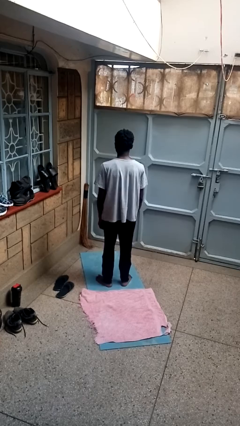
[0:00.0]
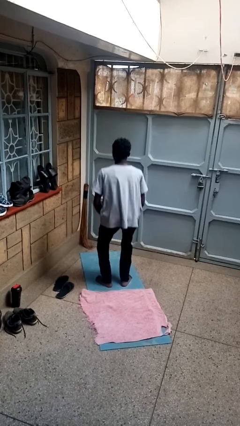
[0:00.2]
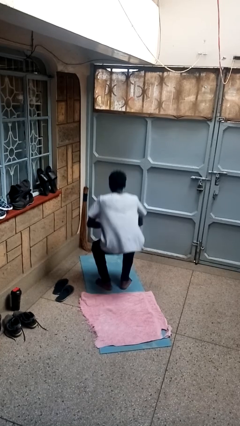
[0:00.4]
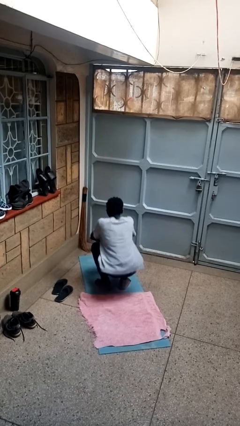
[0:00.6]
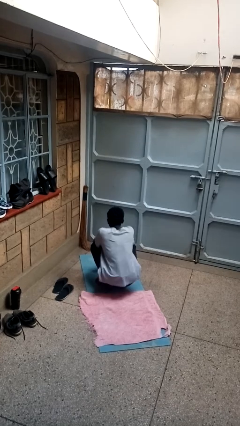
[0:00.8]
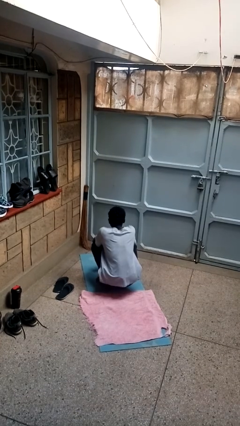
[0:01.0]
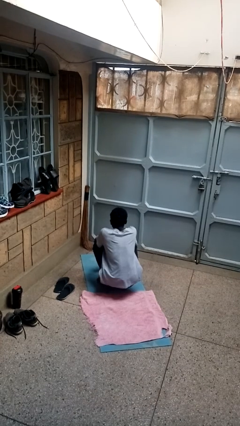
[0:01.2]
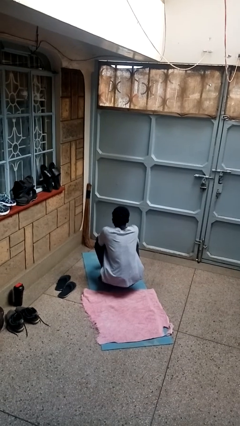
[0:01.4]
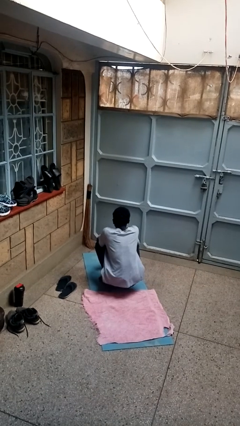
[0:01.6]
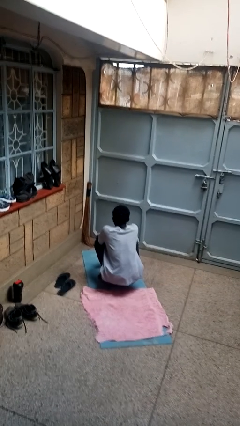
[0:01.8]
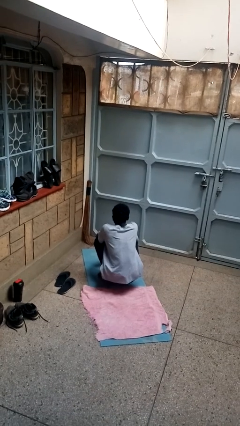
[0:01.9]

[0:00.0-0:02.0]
person squats

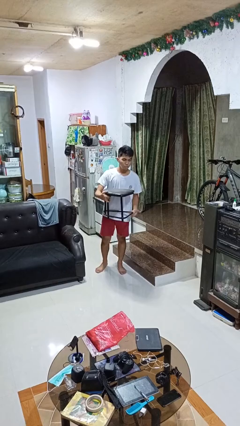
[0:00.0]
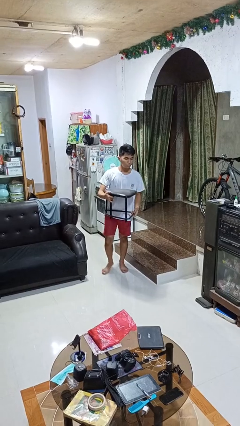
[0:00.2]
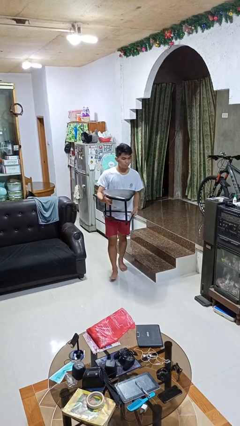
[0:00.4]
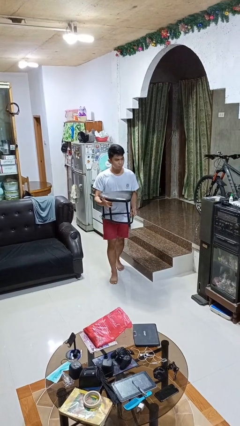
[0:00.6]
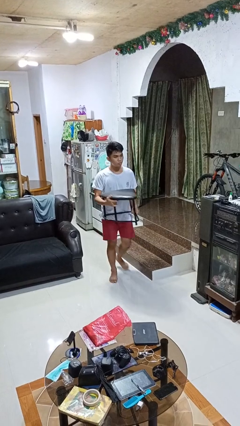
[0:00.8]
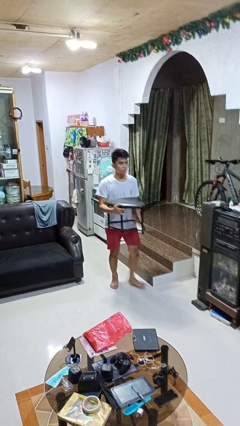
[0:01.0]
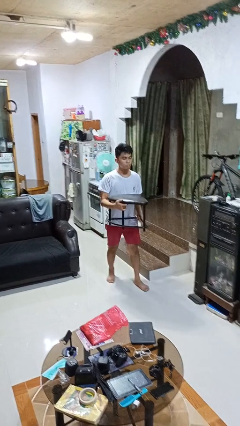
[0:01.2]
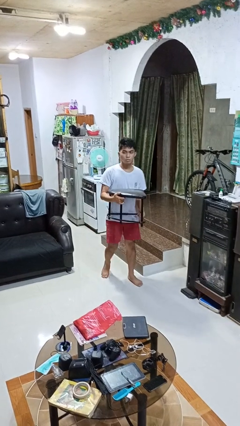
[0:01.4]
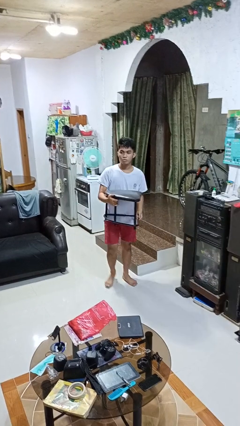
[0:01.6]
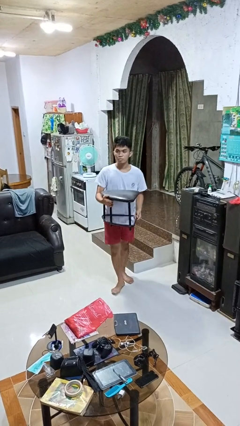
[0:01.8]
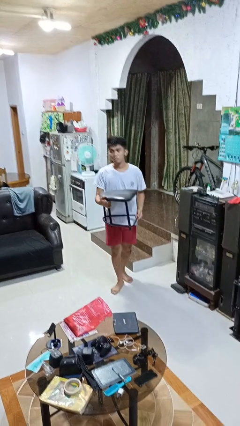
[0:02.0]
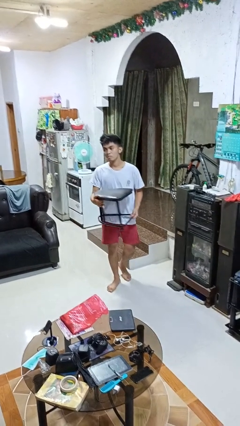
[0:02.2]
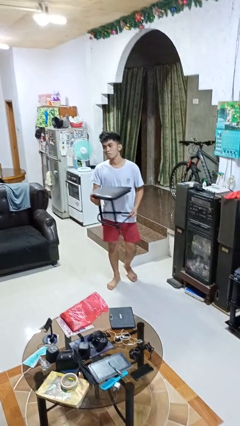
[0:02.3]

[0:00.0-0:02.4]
person carries furniture

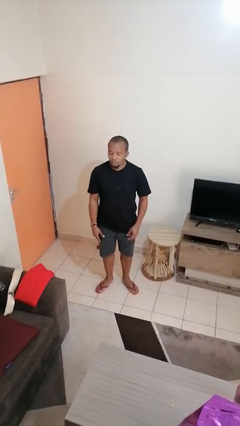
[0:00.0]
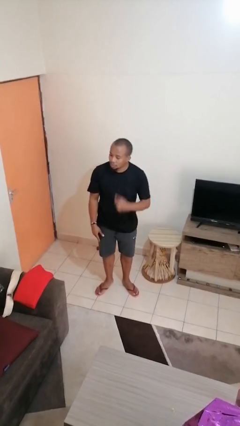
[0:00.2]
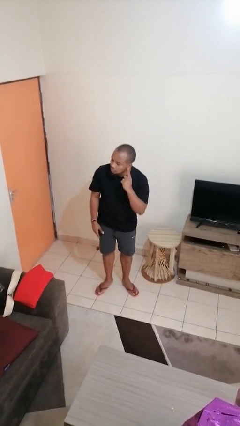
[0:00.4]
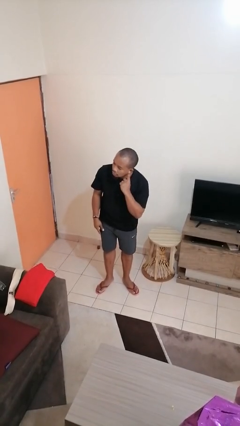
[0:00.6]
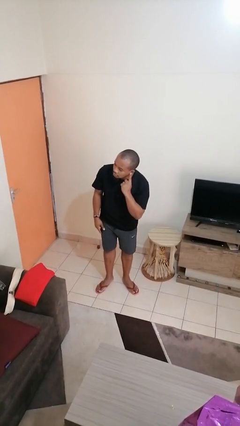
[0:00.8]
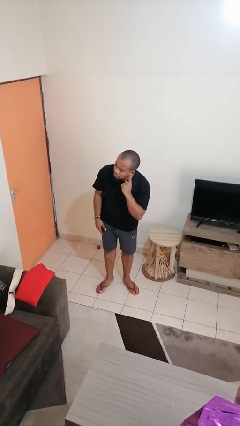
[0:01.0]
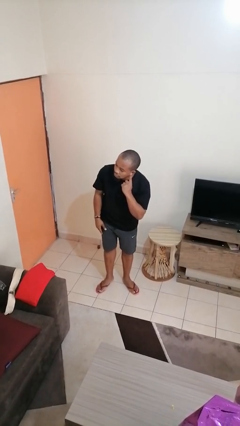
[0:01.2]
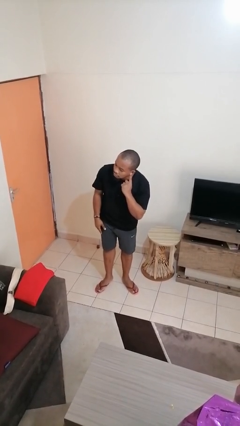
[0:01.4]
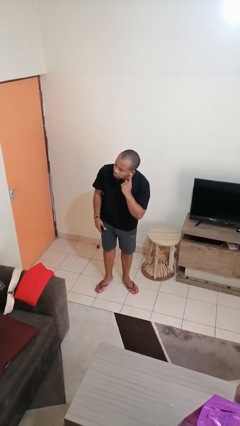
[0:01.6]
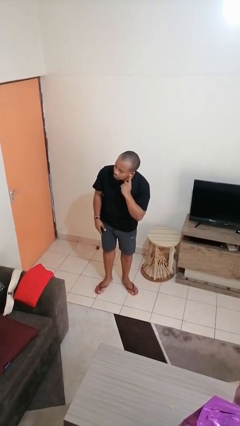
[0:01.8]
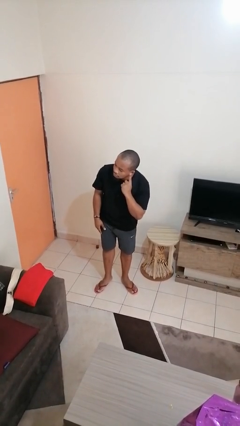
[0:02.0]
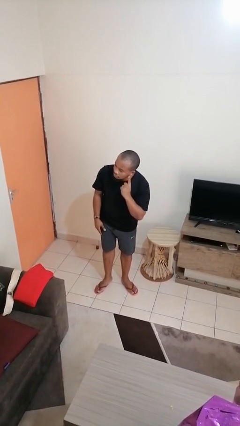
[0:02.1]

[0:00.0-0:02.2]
person gestures listen closely

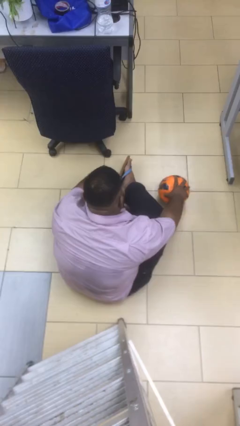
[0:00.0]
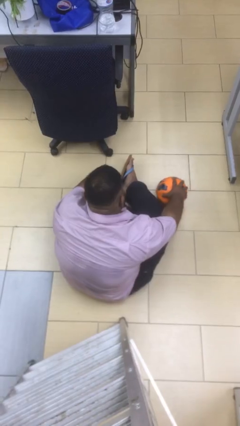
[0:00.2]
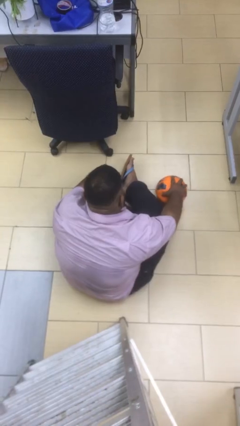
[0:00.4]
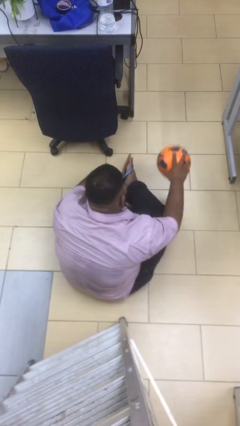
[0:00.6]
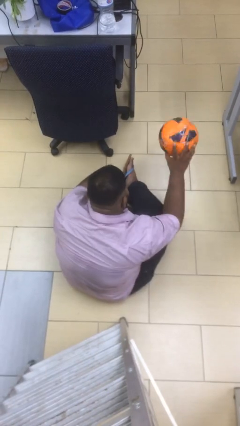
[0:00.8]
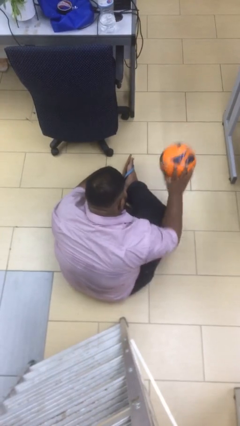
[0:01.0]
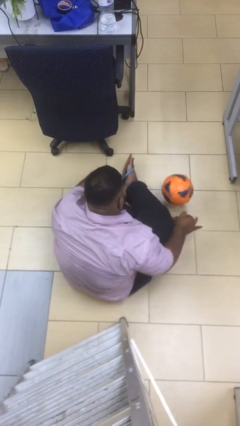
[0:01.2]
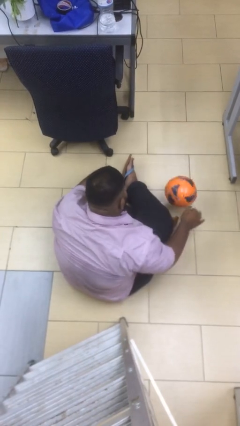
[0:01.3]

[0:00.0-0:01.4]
person bounces ball on floor

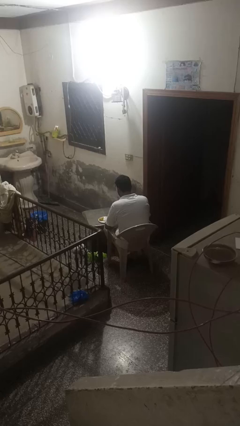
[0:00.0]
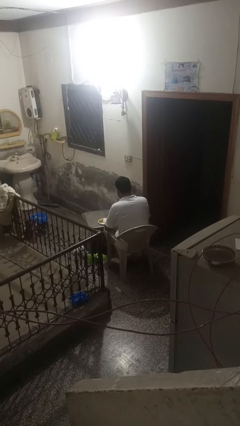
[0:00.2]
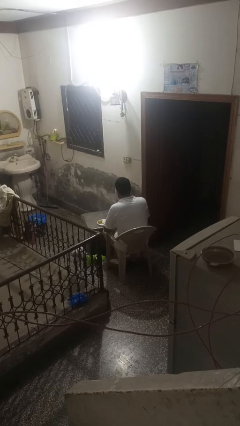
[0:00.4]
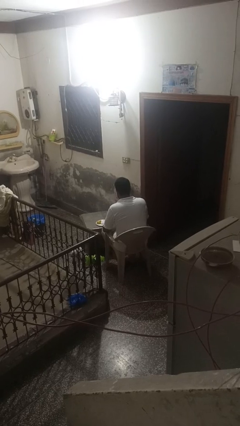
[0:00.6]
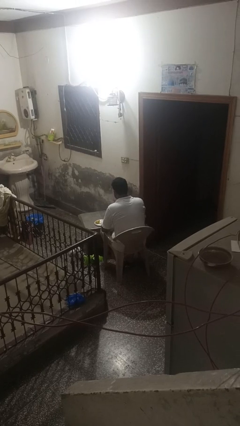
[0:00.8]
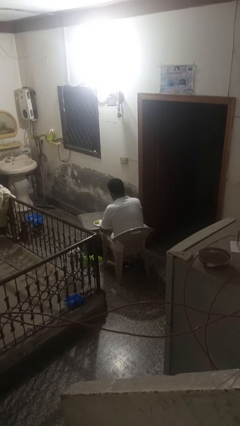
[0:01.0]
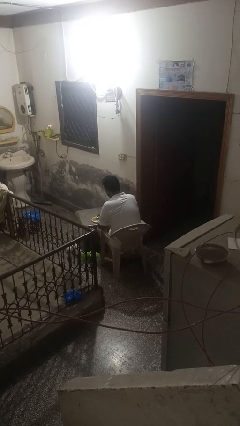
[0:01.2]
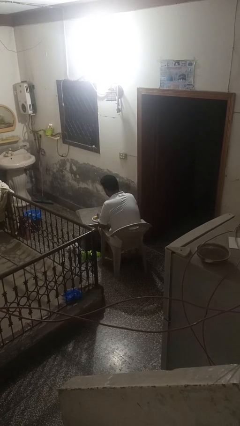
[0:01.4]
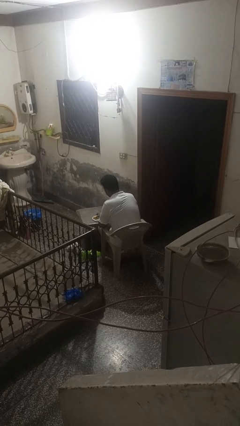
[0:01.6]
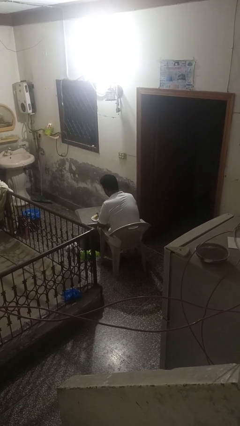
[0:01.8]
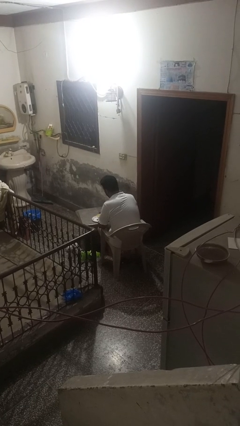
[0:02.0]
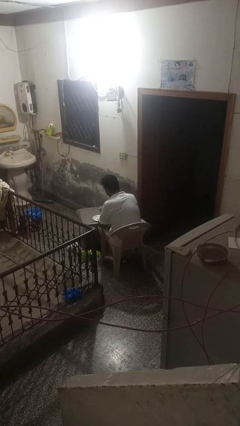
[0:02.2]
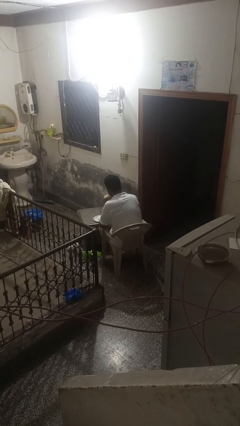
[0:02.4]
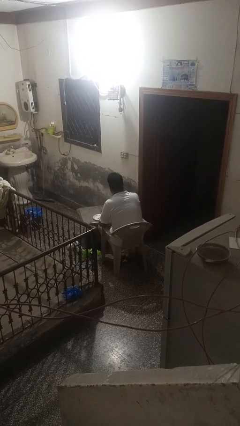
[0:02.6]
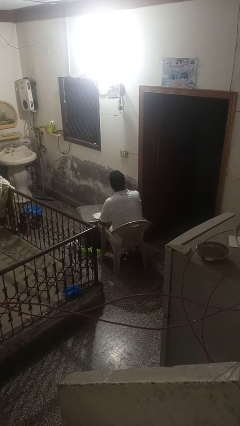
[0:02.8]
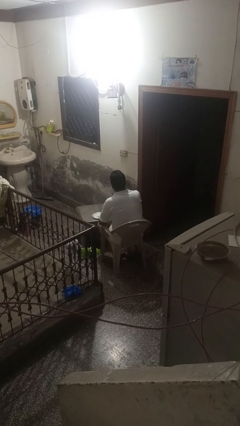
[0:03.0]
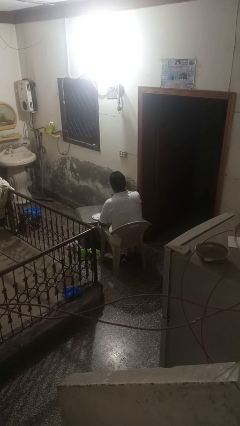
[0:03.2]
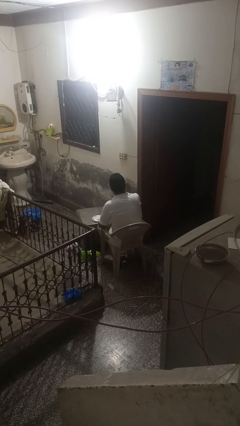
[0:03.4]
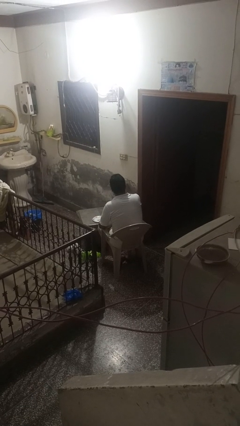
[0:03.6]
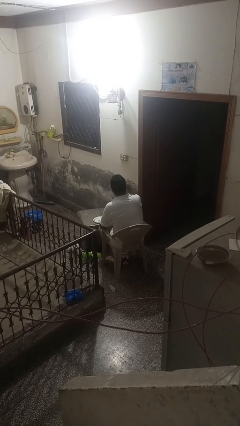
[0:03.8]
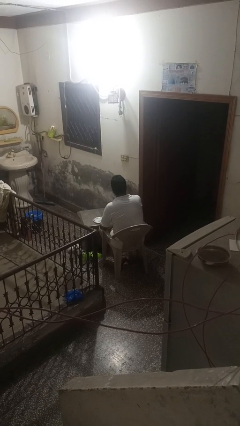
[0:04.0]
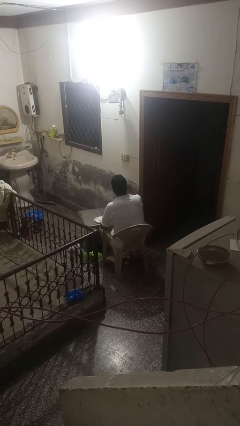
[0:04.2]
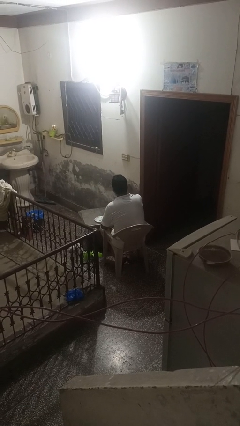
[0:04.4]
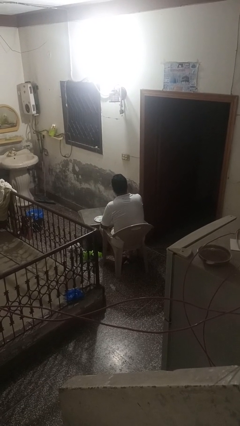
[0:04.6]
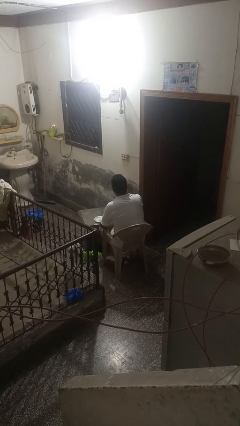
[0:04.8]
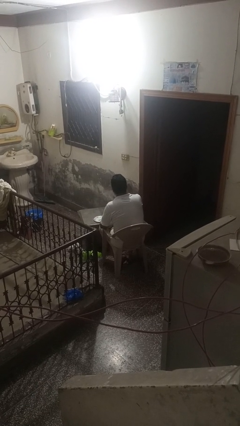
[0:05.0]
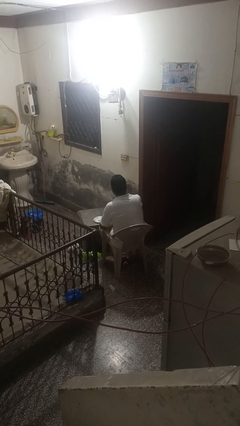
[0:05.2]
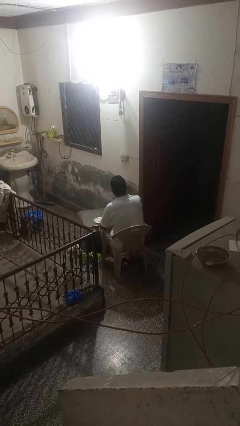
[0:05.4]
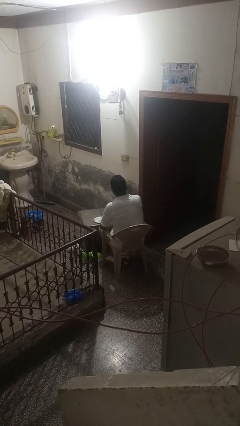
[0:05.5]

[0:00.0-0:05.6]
person eats with hands

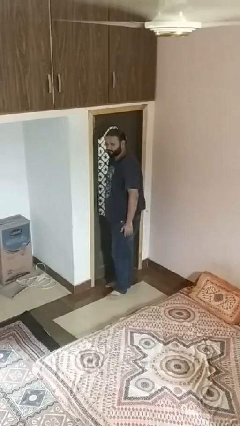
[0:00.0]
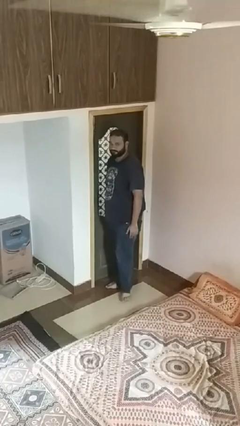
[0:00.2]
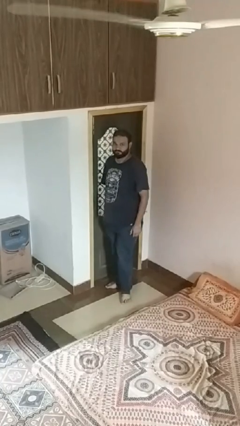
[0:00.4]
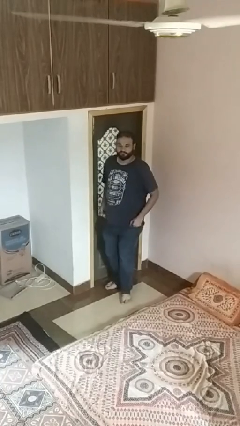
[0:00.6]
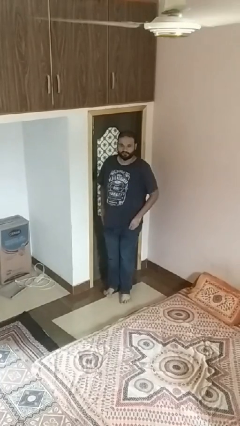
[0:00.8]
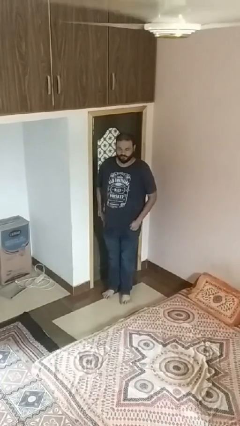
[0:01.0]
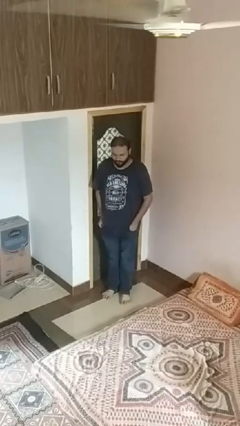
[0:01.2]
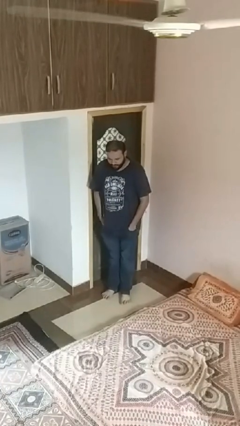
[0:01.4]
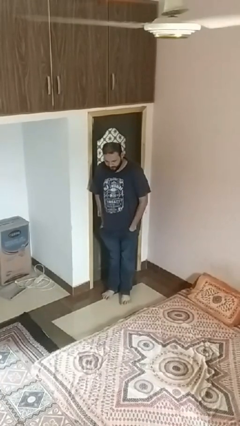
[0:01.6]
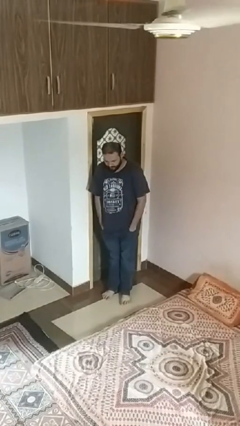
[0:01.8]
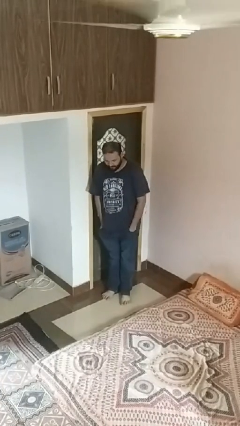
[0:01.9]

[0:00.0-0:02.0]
person puts hands in back pockets

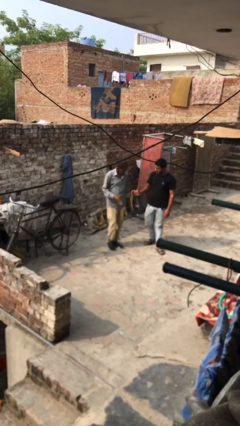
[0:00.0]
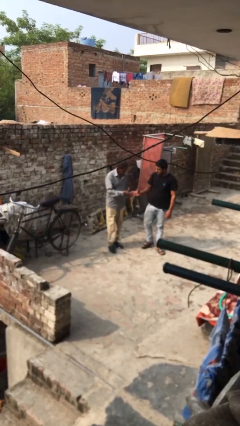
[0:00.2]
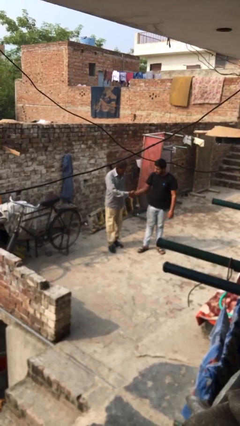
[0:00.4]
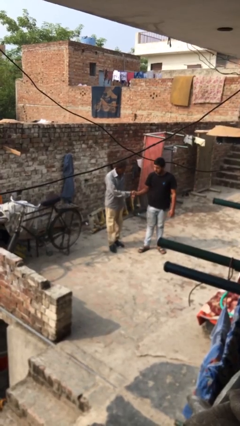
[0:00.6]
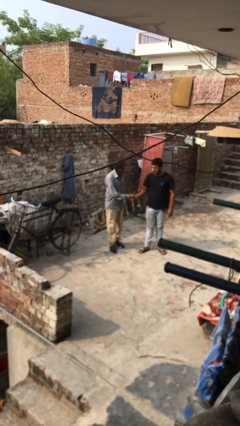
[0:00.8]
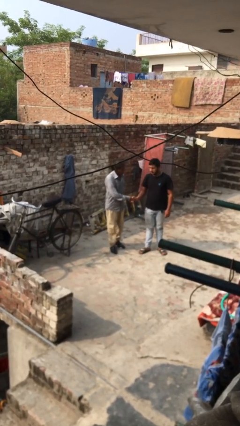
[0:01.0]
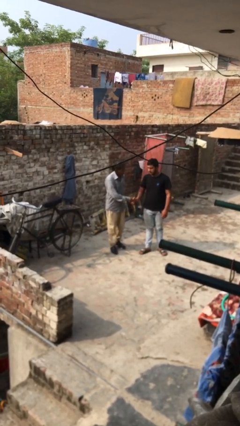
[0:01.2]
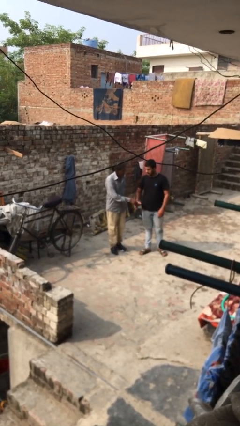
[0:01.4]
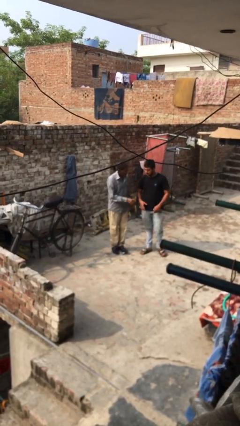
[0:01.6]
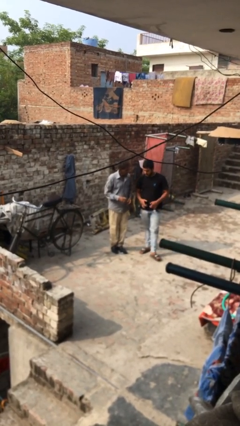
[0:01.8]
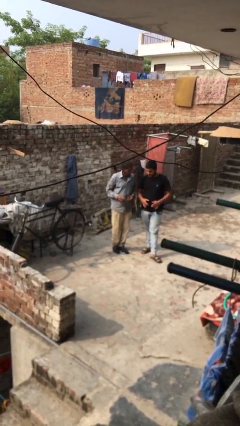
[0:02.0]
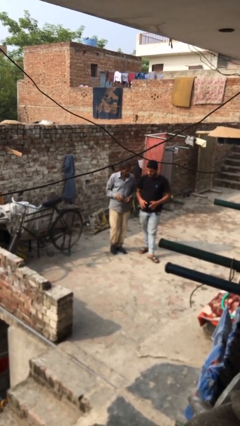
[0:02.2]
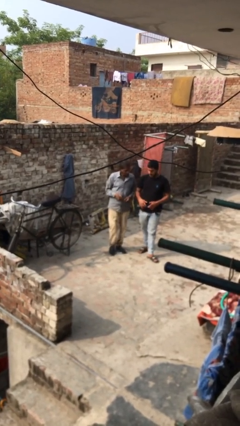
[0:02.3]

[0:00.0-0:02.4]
person shakes hand
